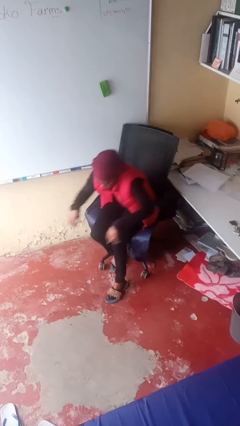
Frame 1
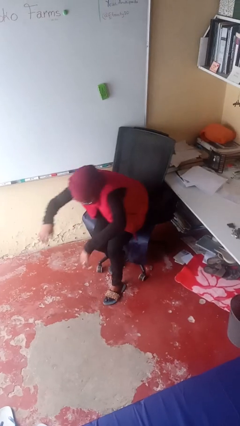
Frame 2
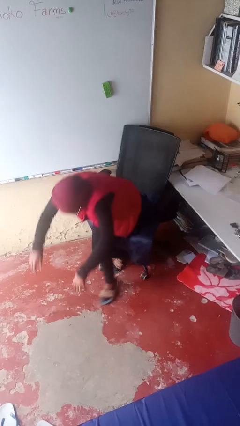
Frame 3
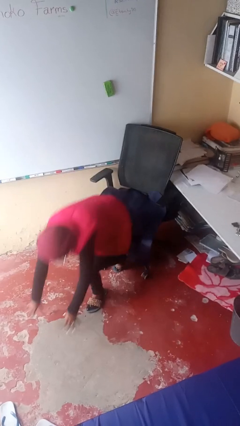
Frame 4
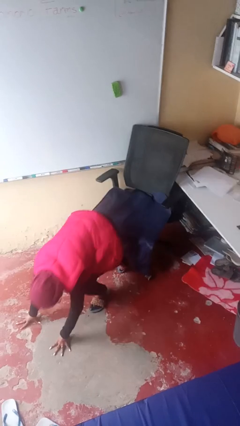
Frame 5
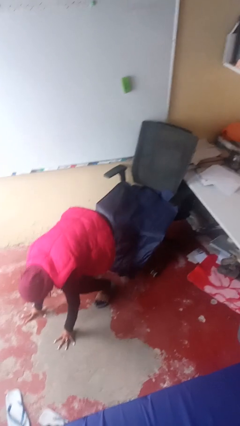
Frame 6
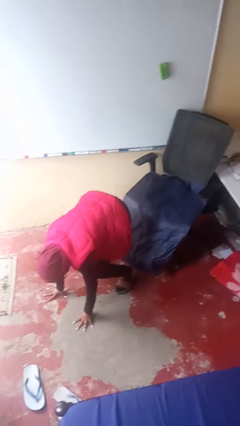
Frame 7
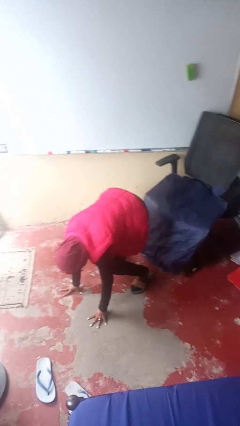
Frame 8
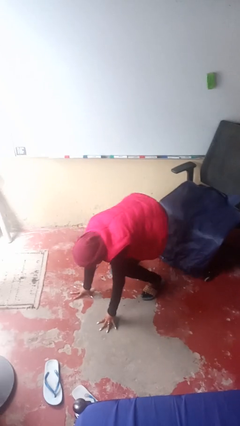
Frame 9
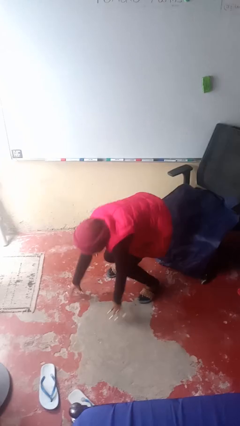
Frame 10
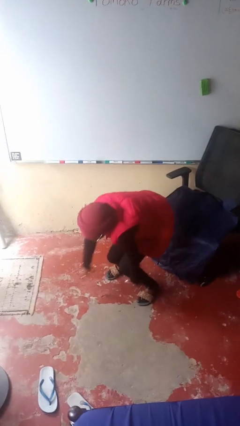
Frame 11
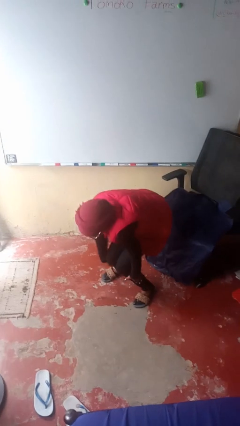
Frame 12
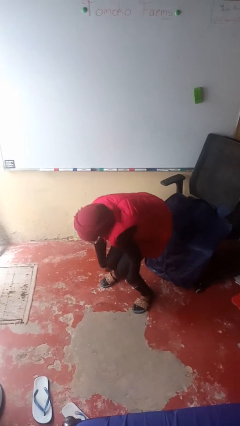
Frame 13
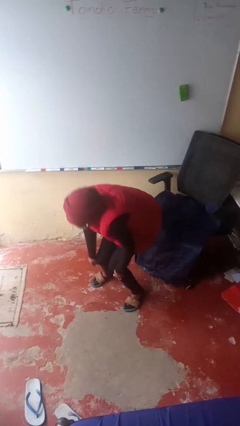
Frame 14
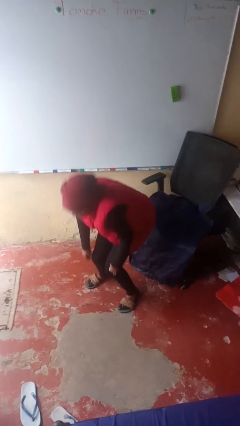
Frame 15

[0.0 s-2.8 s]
person falls from chair

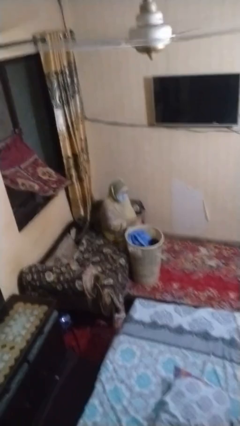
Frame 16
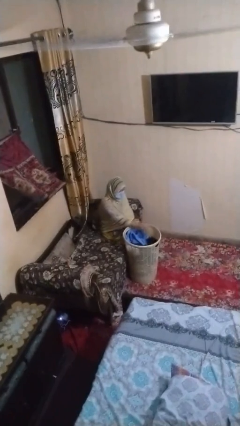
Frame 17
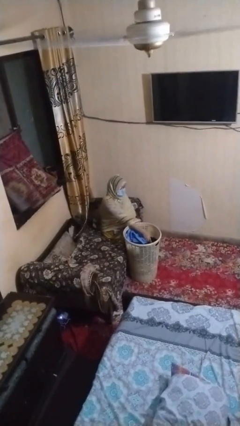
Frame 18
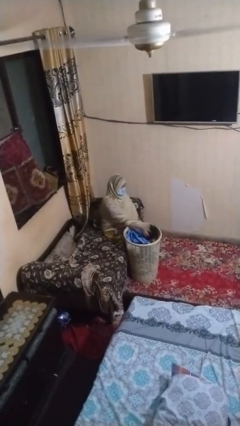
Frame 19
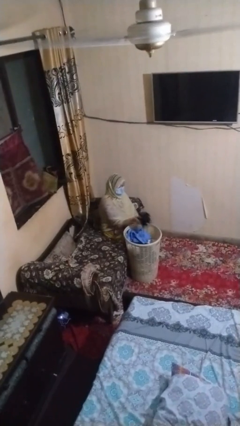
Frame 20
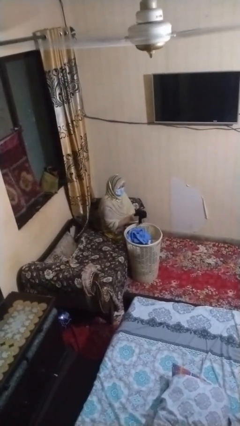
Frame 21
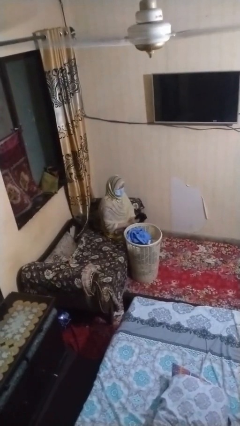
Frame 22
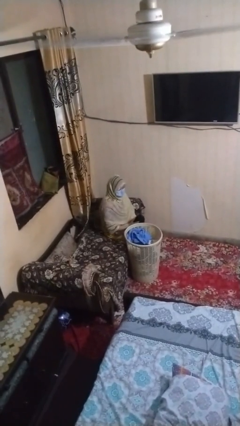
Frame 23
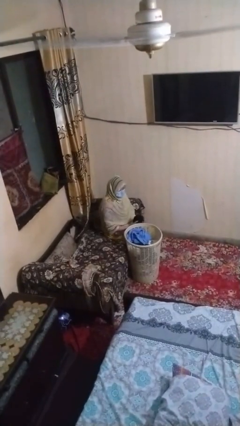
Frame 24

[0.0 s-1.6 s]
person takes object from basket

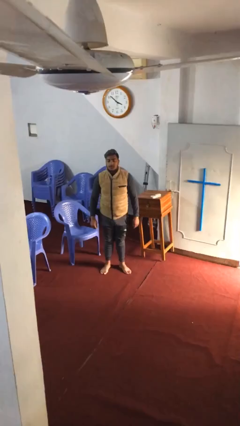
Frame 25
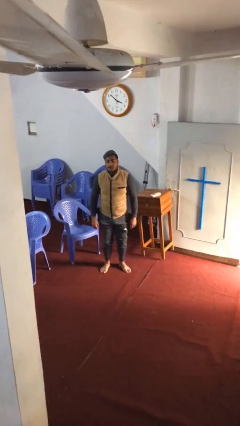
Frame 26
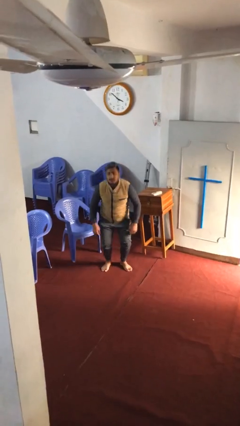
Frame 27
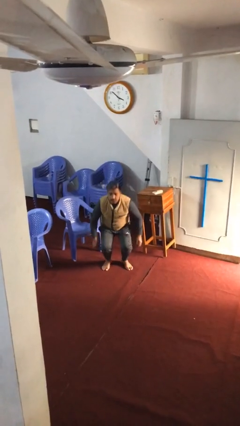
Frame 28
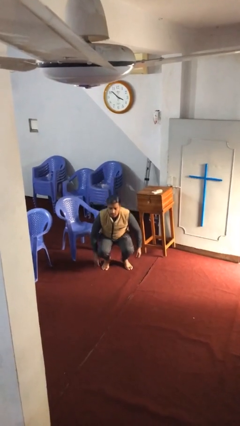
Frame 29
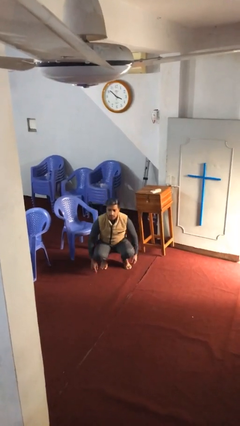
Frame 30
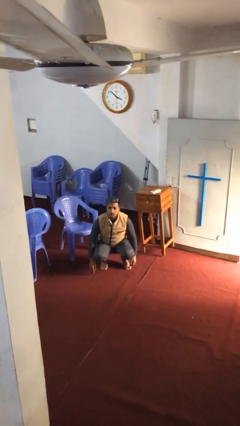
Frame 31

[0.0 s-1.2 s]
person sits down

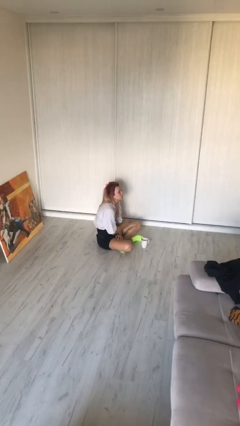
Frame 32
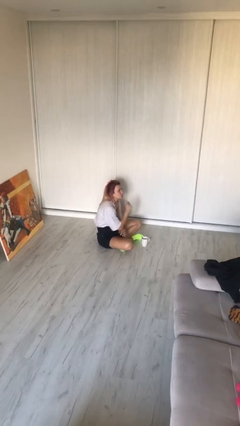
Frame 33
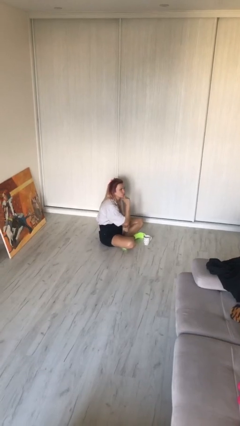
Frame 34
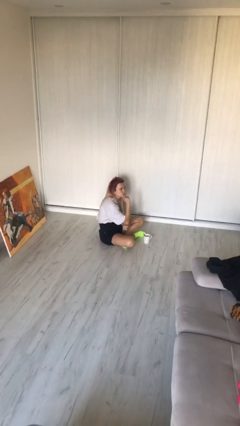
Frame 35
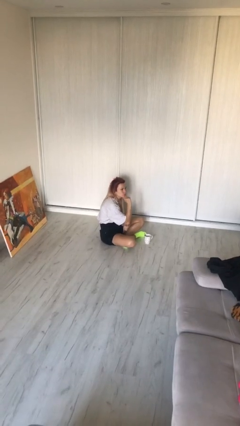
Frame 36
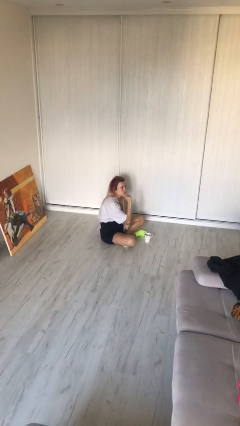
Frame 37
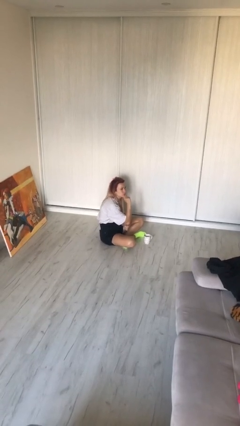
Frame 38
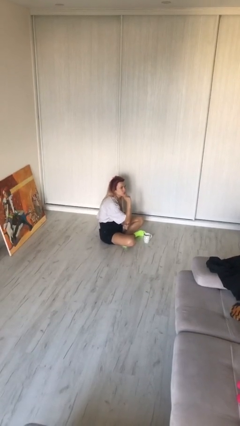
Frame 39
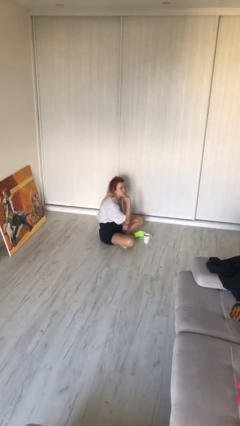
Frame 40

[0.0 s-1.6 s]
person strokes chin

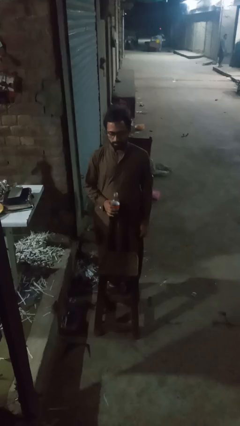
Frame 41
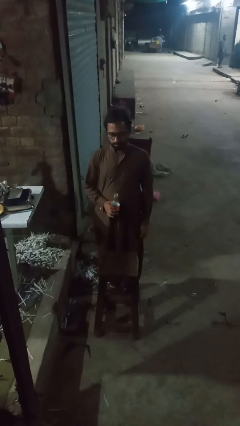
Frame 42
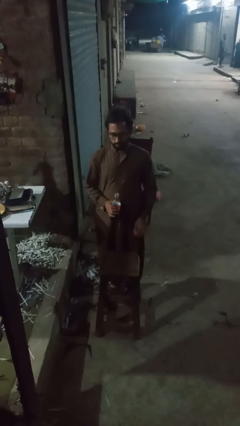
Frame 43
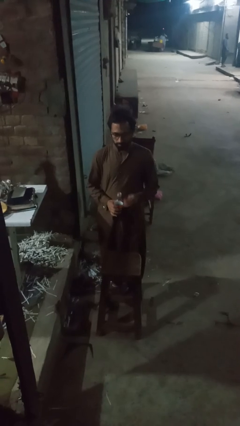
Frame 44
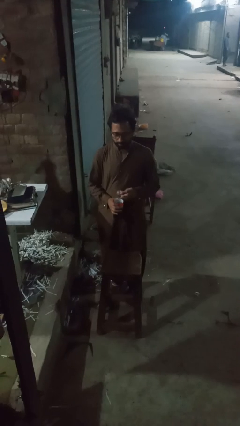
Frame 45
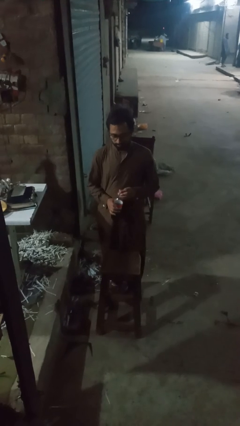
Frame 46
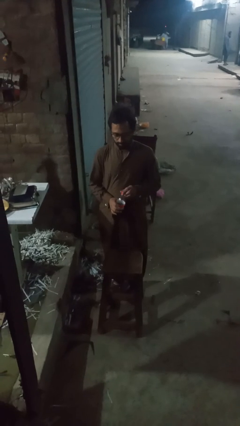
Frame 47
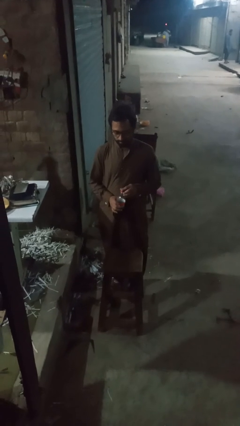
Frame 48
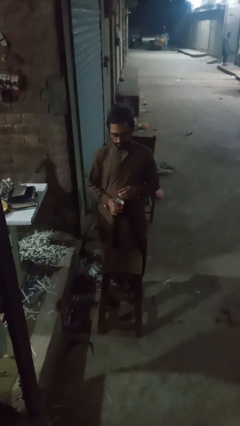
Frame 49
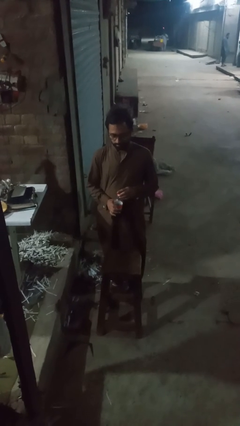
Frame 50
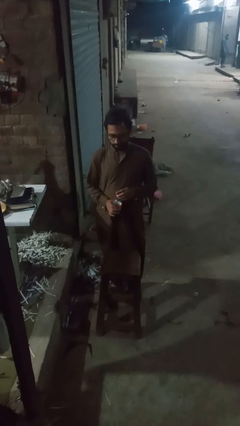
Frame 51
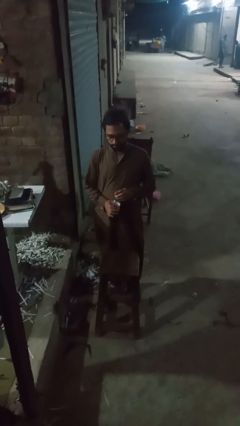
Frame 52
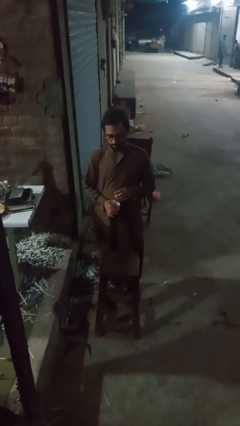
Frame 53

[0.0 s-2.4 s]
person screws lid to bottle

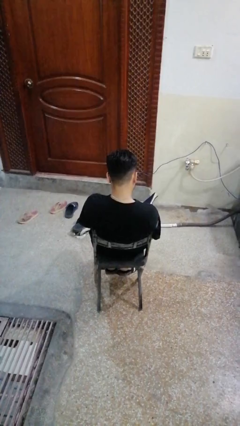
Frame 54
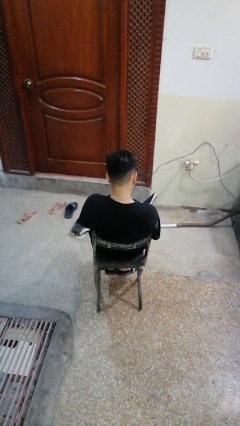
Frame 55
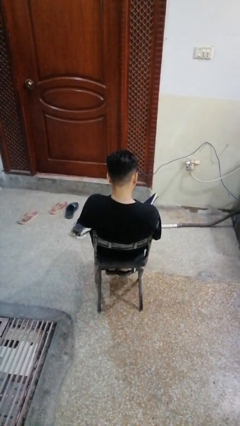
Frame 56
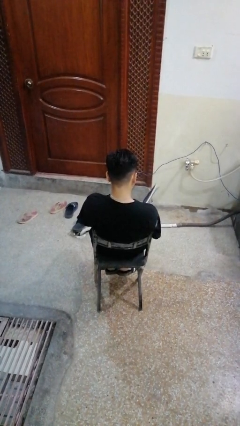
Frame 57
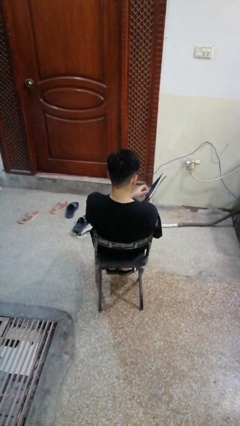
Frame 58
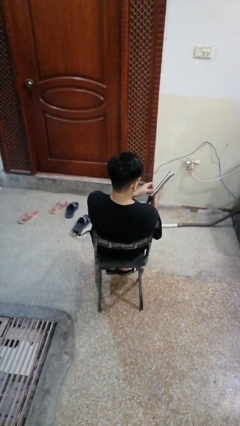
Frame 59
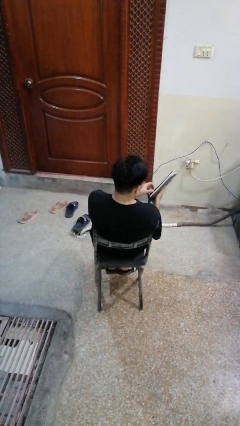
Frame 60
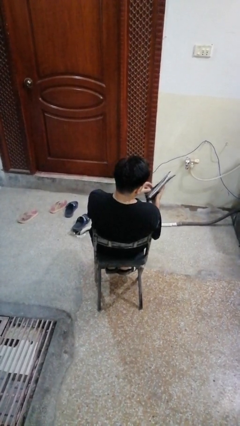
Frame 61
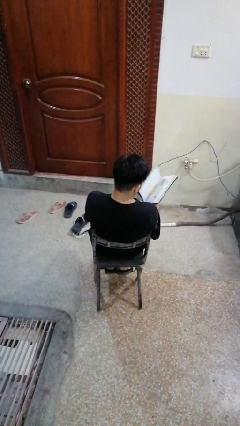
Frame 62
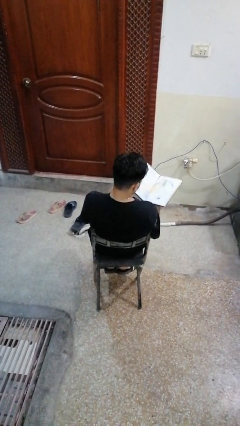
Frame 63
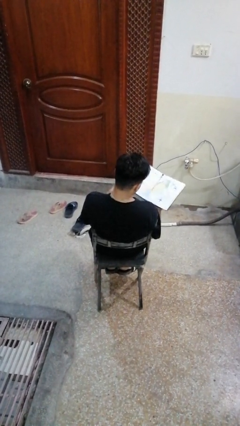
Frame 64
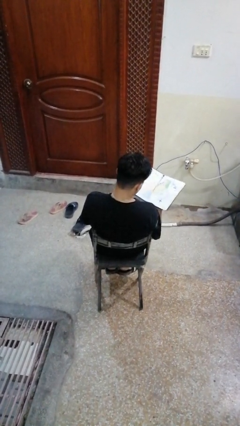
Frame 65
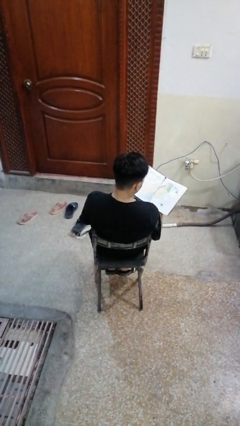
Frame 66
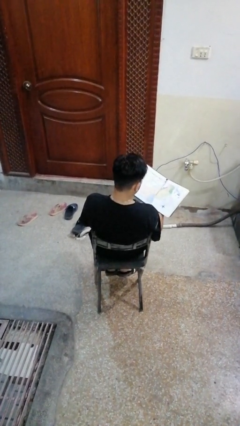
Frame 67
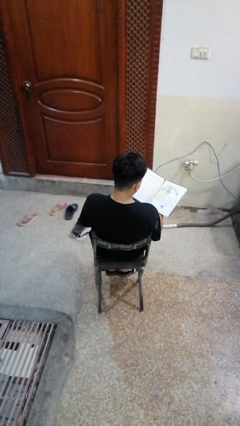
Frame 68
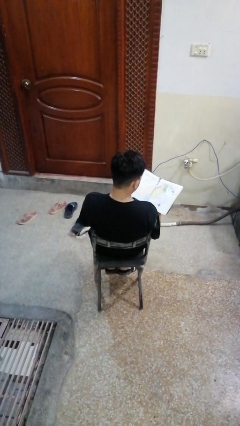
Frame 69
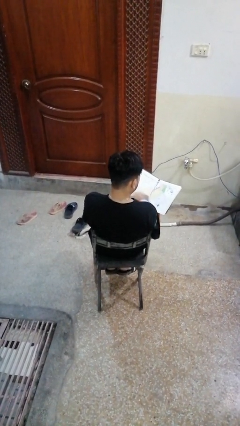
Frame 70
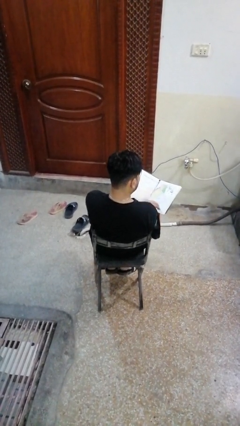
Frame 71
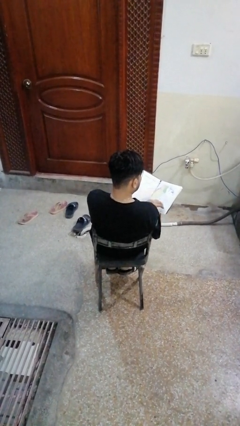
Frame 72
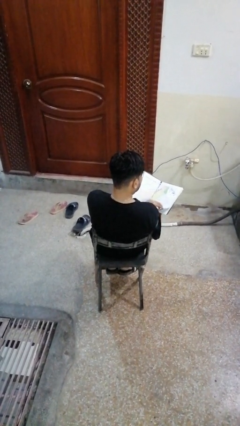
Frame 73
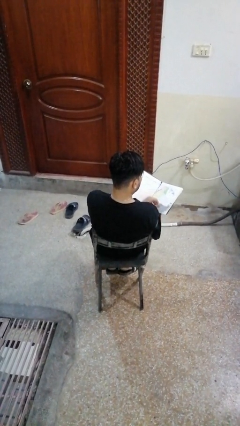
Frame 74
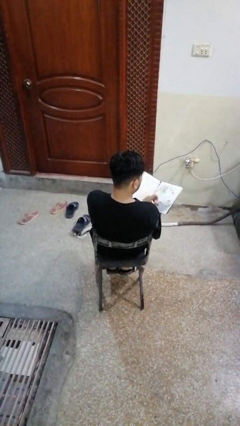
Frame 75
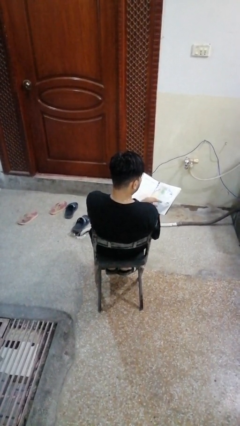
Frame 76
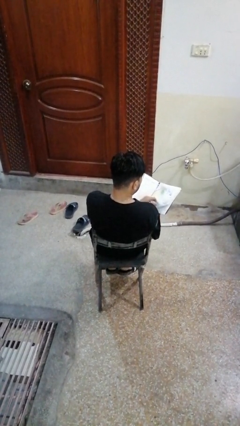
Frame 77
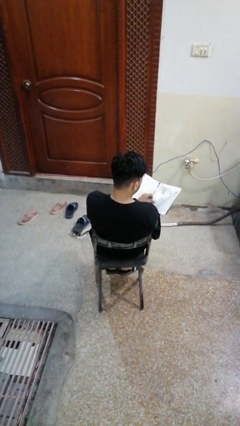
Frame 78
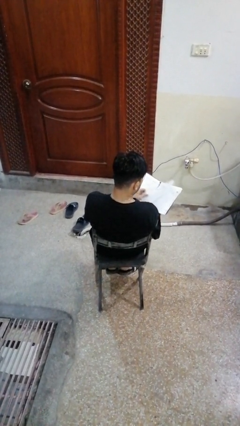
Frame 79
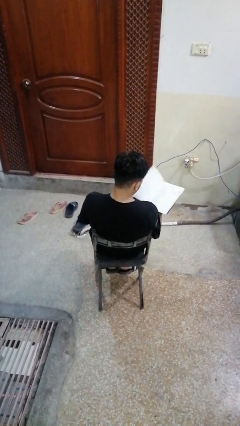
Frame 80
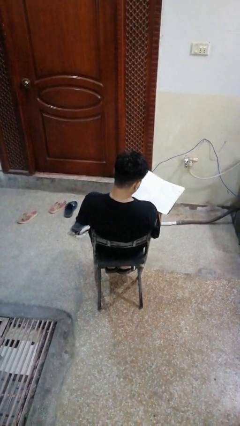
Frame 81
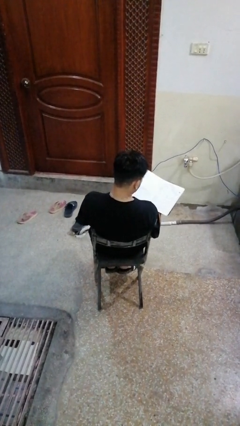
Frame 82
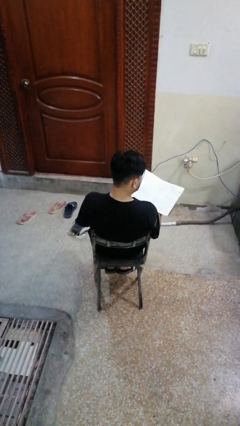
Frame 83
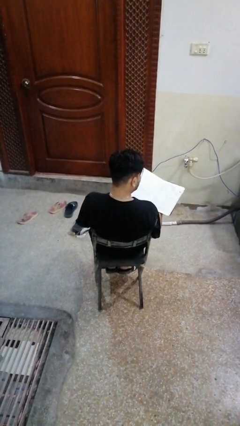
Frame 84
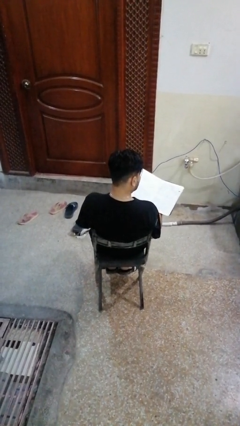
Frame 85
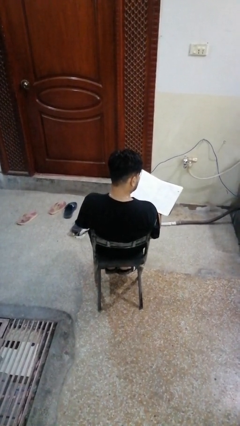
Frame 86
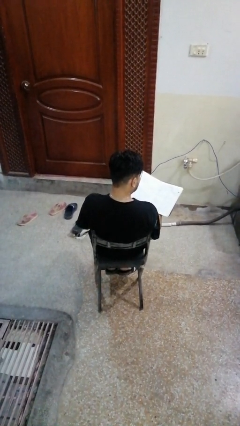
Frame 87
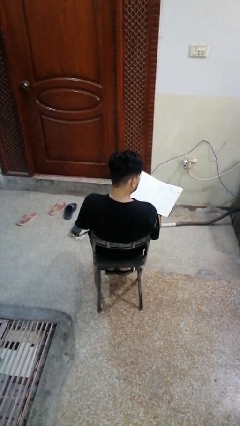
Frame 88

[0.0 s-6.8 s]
person reads book

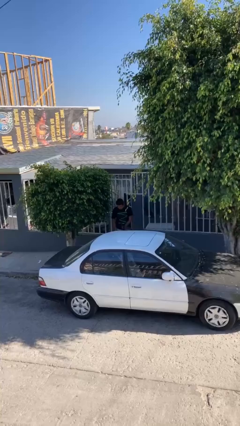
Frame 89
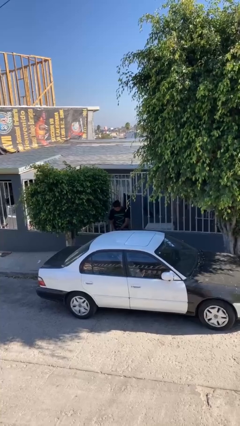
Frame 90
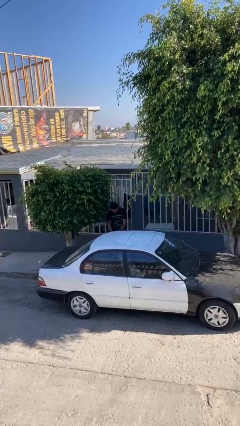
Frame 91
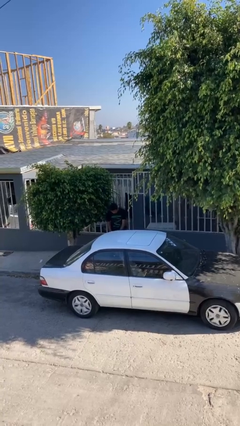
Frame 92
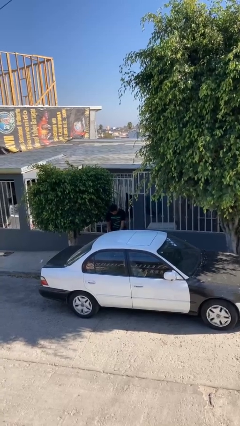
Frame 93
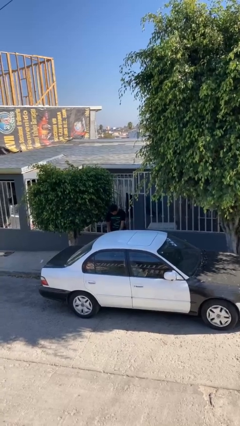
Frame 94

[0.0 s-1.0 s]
person closes car door
